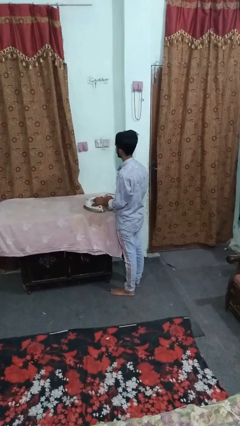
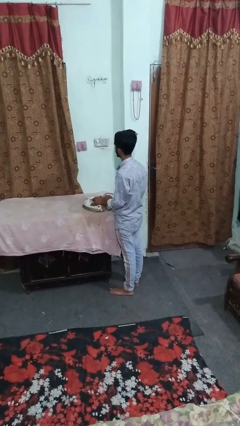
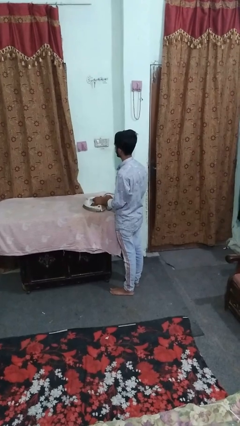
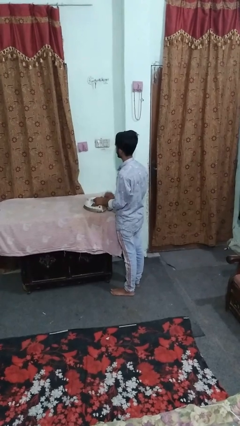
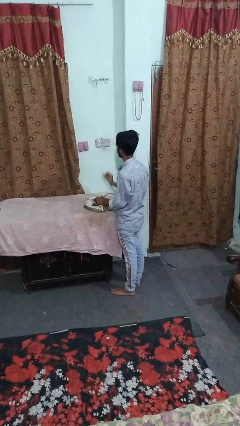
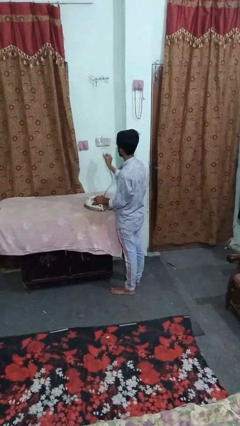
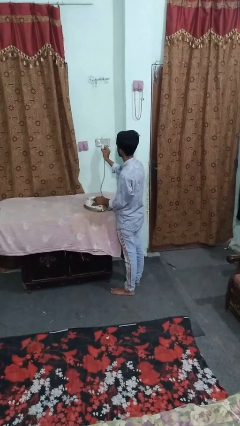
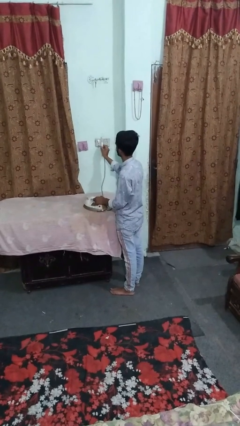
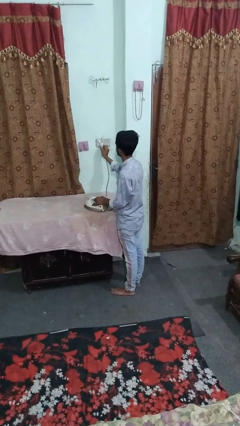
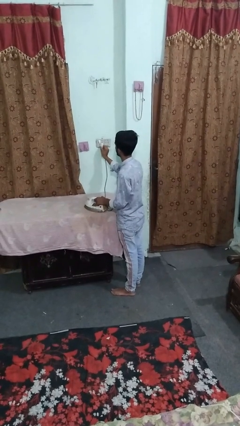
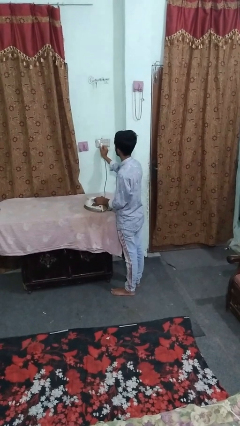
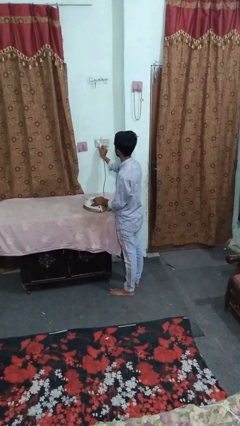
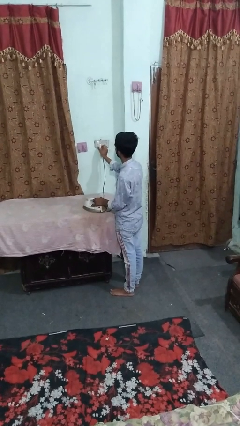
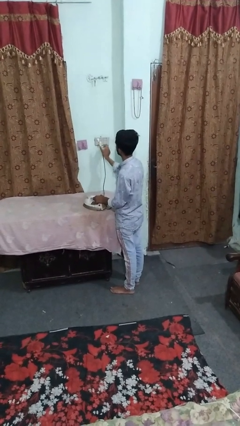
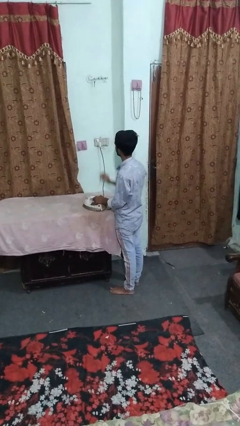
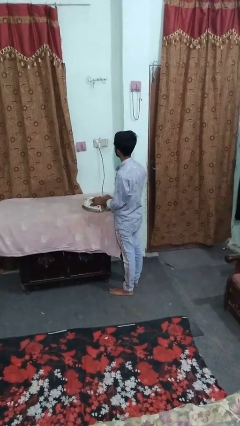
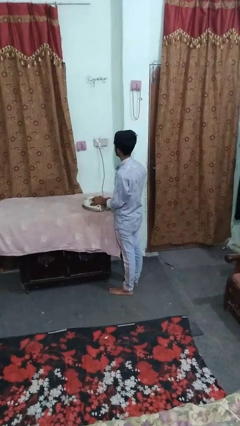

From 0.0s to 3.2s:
person plugs into electrical socket

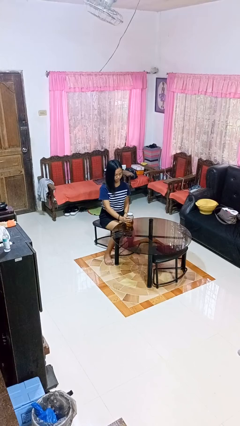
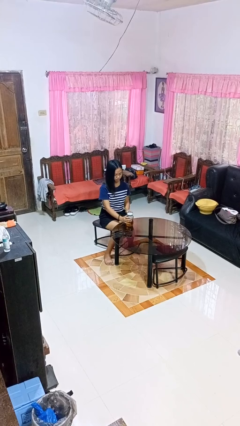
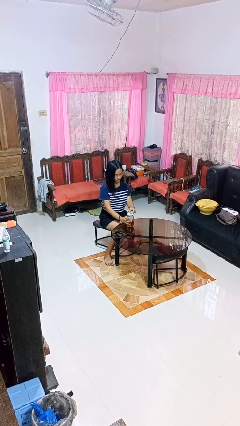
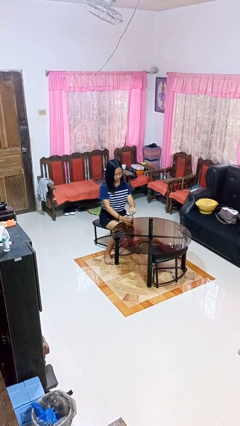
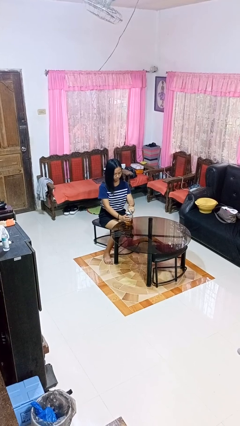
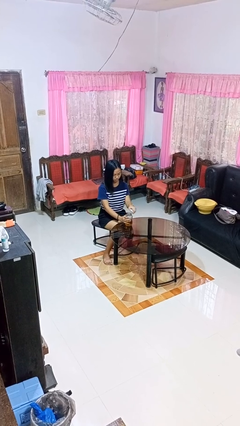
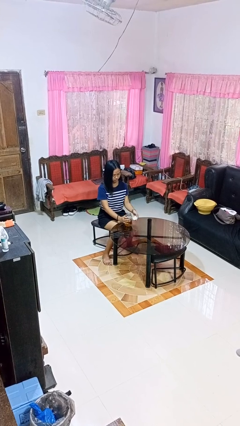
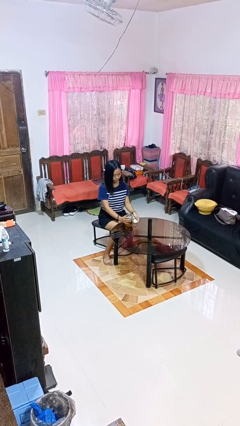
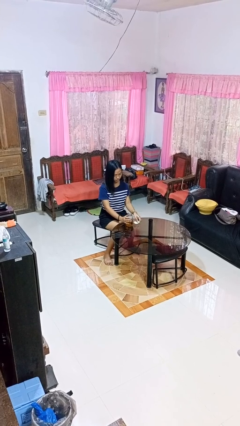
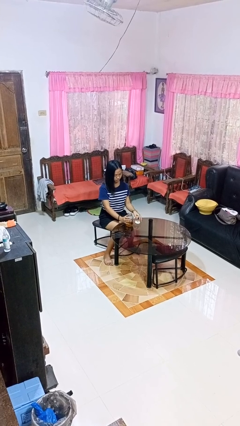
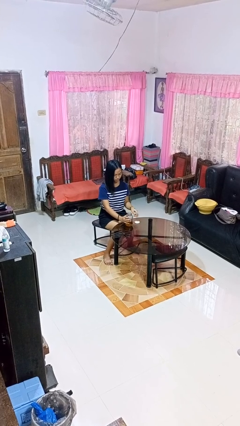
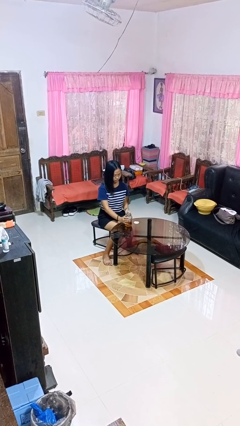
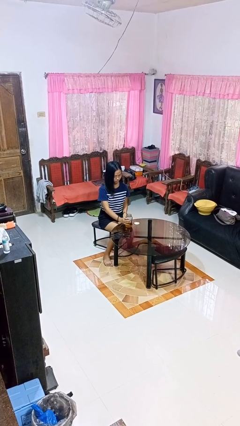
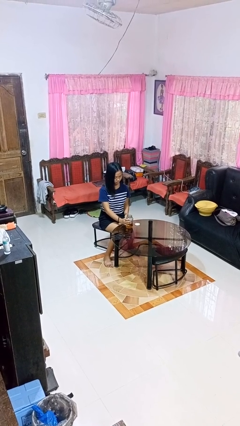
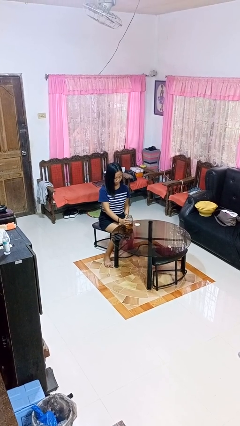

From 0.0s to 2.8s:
person opens jar

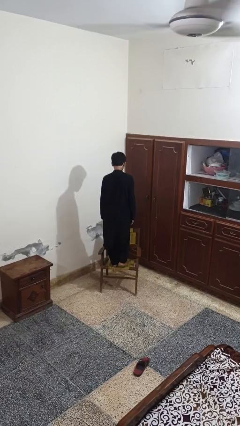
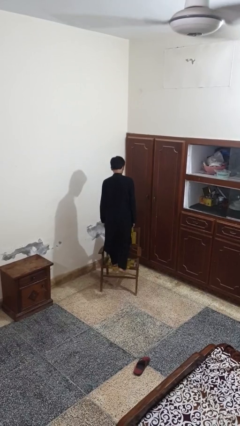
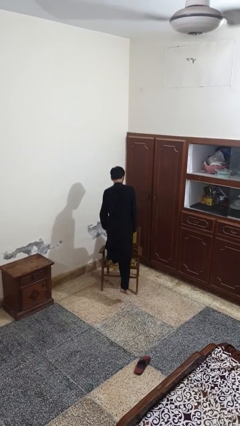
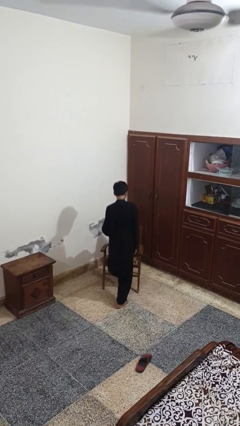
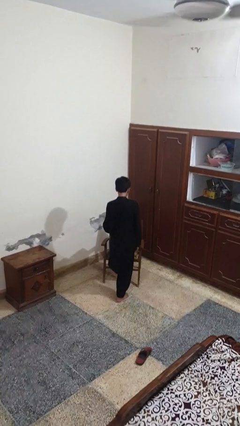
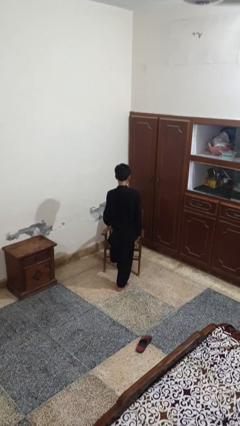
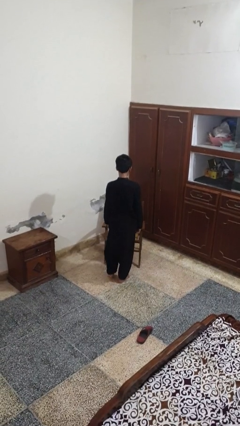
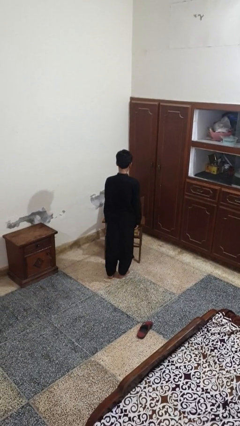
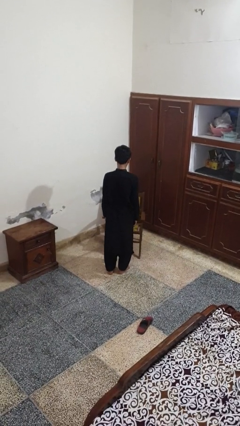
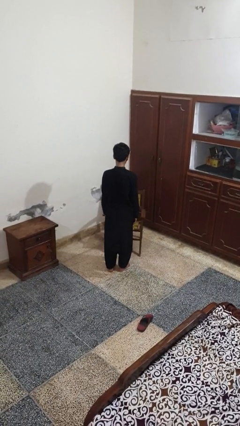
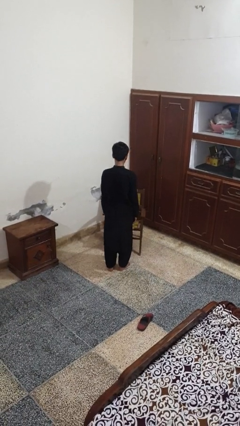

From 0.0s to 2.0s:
person climbs off chair

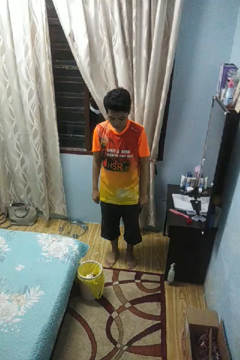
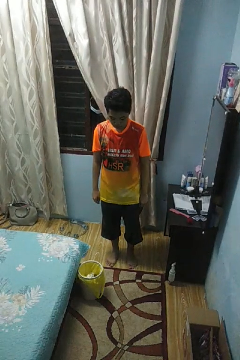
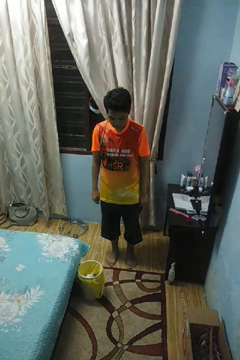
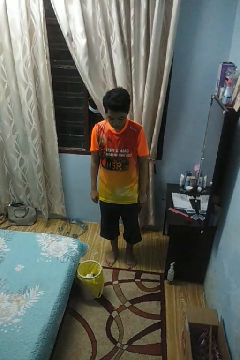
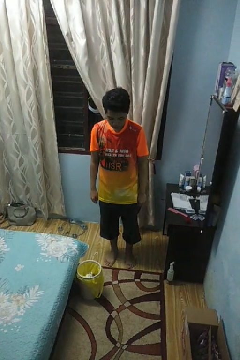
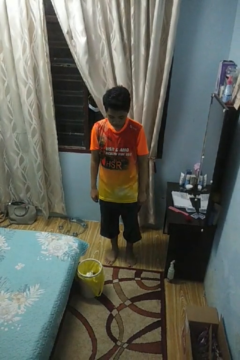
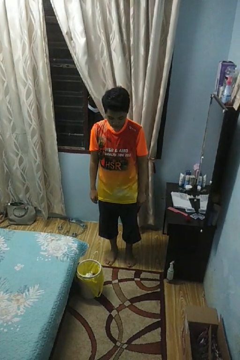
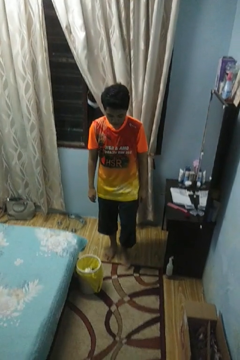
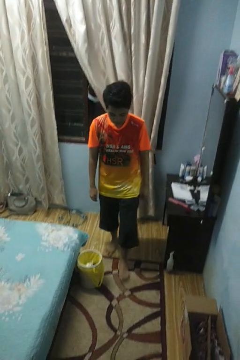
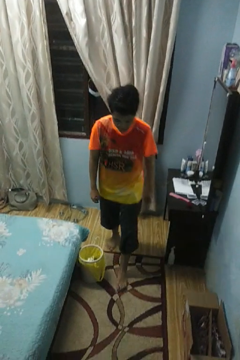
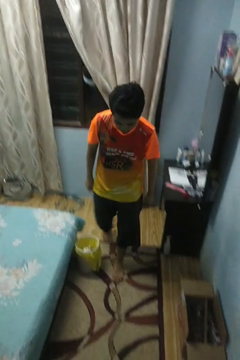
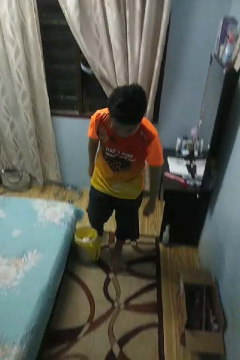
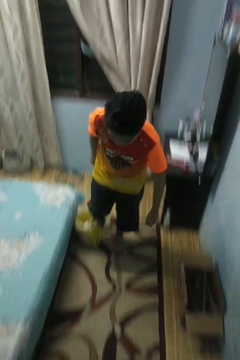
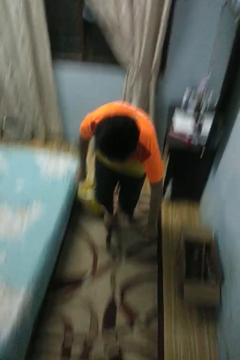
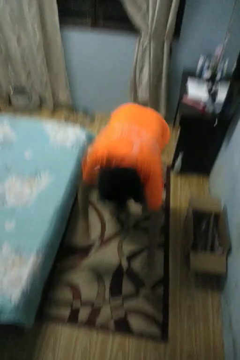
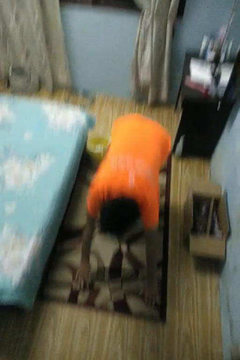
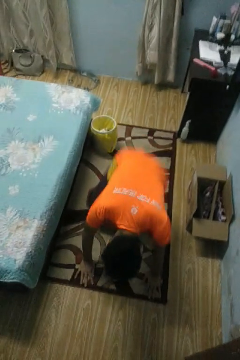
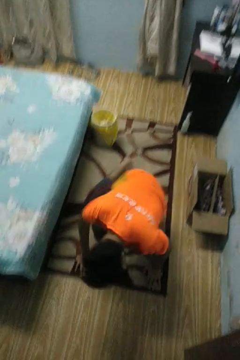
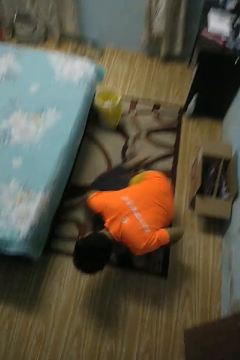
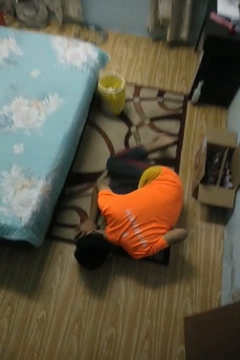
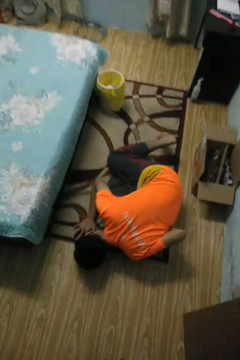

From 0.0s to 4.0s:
person trips on object on floor

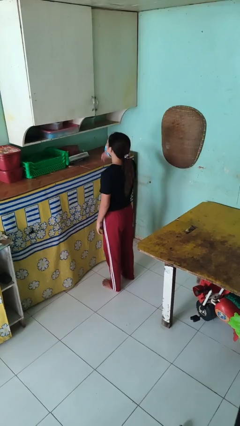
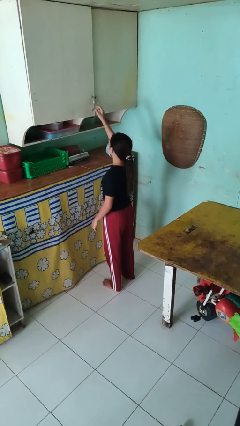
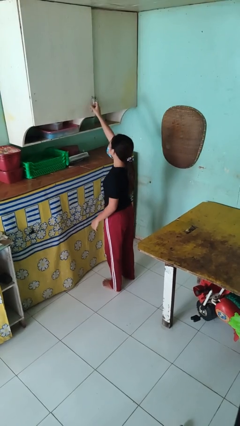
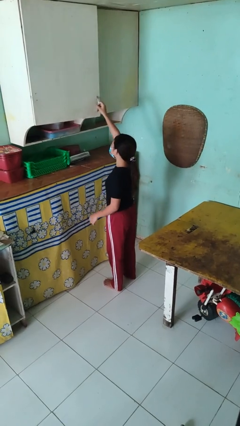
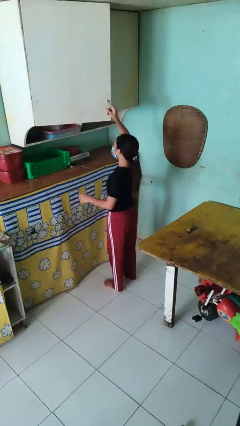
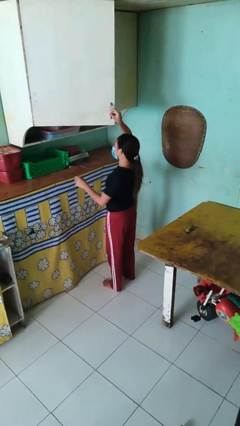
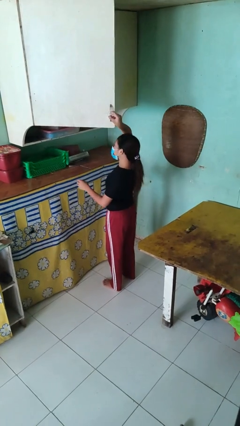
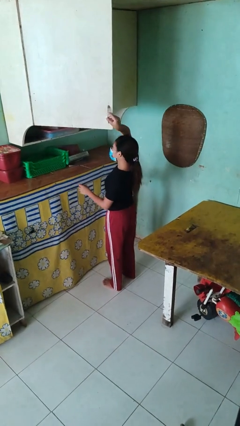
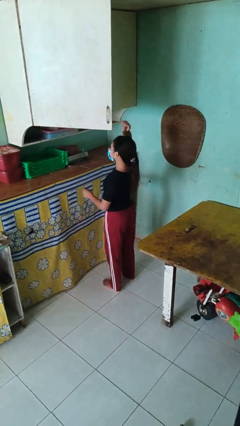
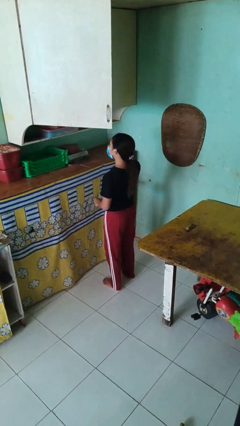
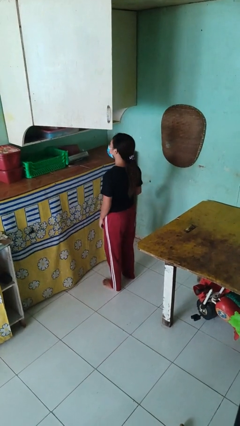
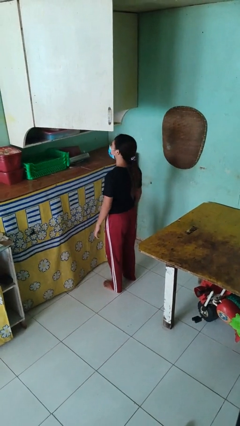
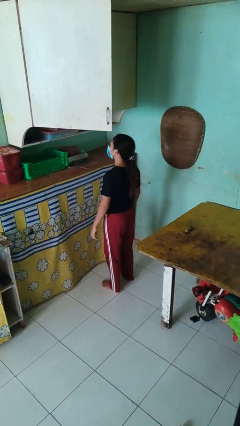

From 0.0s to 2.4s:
person opens cabinet

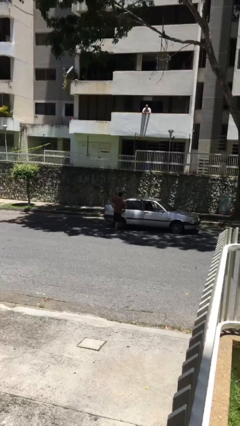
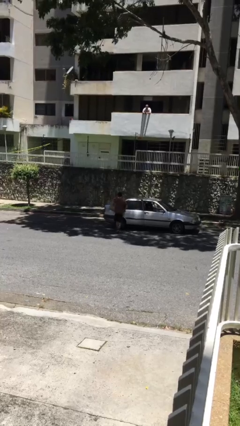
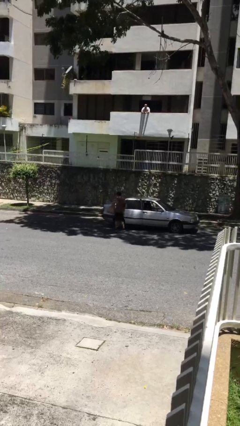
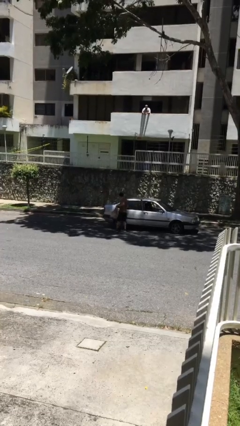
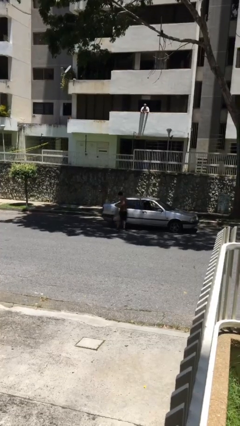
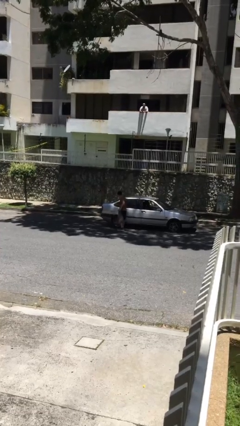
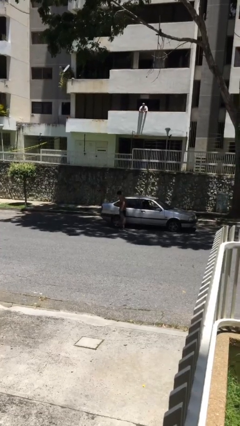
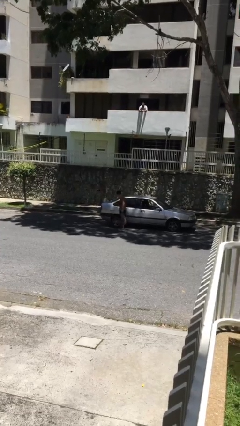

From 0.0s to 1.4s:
person closes car door

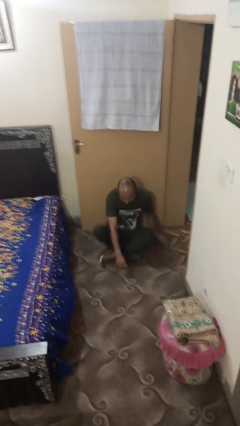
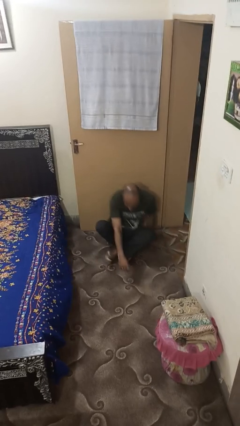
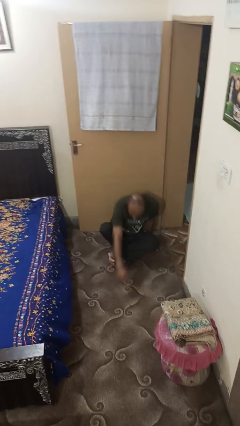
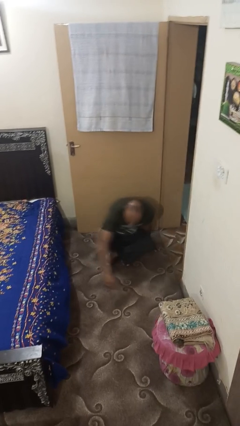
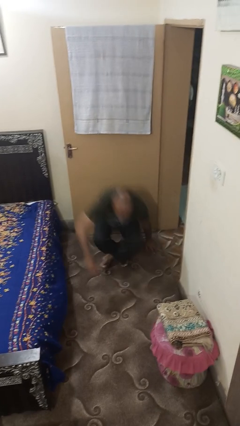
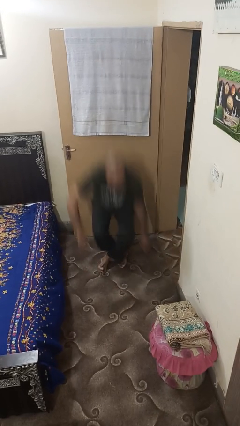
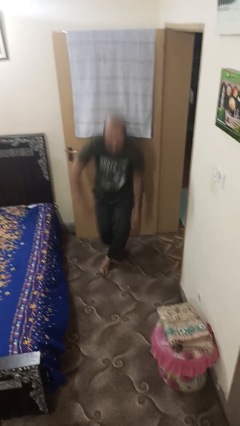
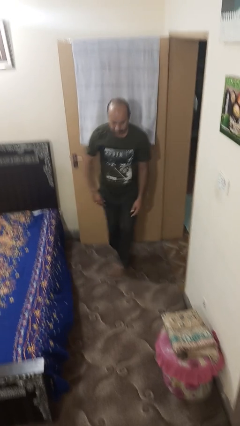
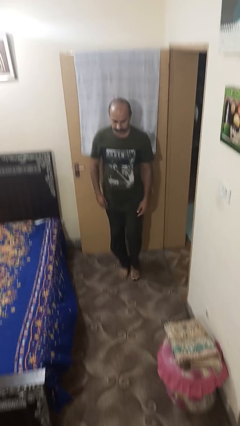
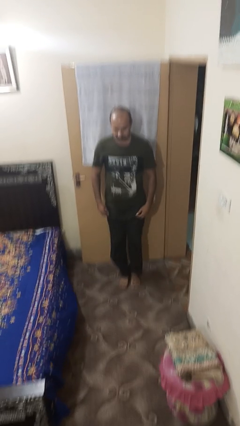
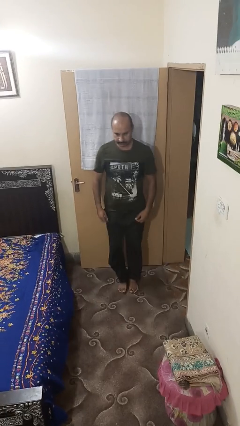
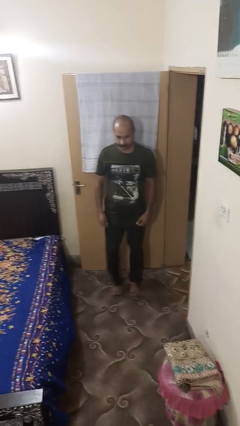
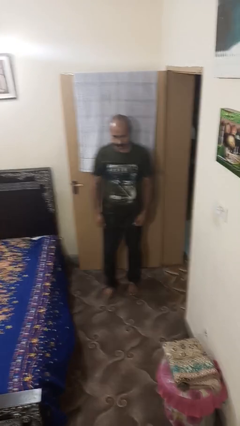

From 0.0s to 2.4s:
person stands up from floor
